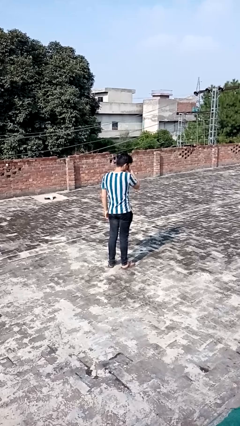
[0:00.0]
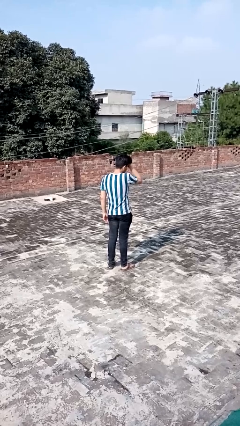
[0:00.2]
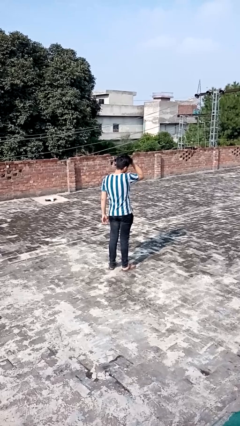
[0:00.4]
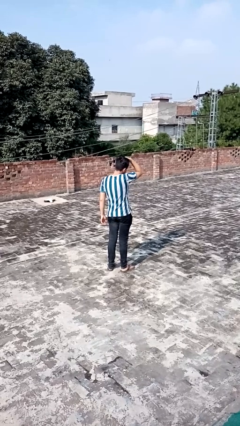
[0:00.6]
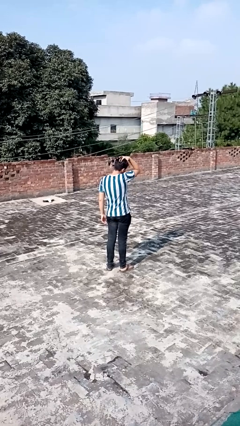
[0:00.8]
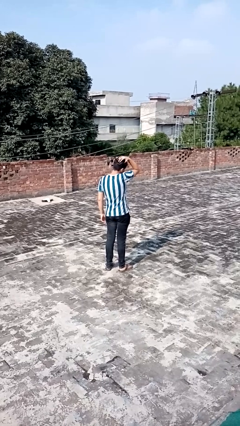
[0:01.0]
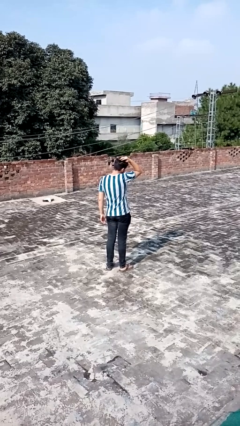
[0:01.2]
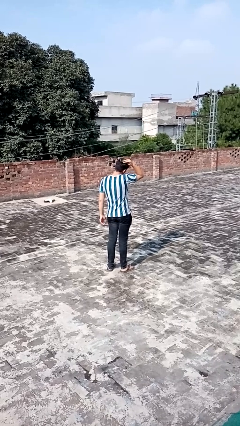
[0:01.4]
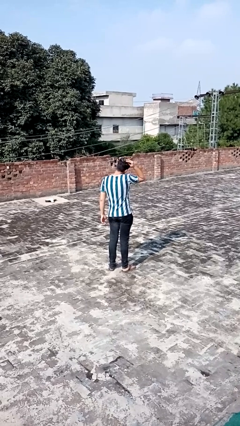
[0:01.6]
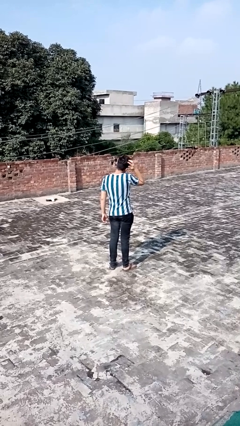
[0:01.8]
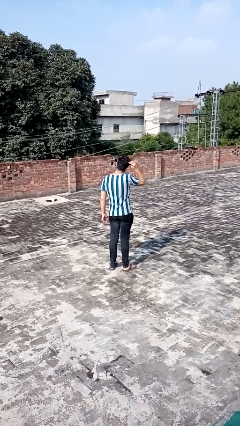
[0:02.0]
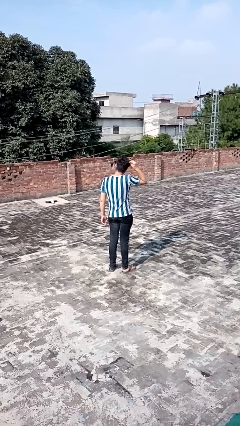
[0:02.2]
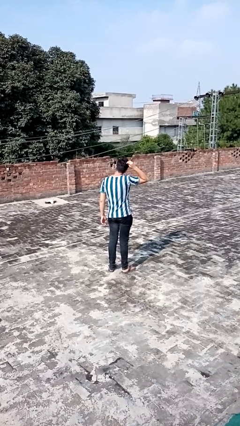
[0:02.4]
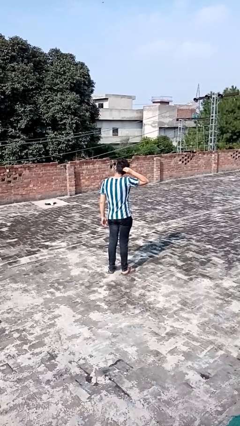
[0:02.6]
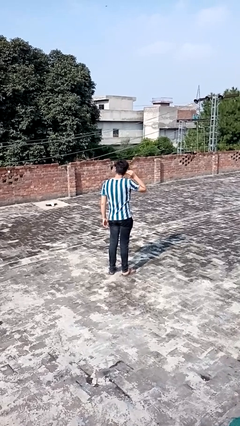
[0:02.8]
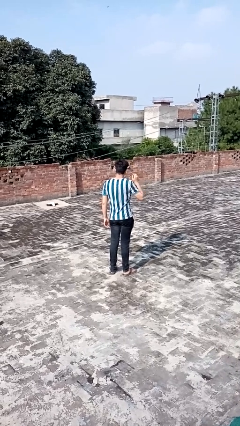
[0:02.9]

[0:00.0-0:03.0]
person strokes hair

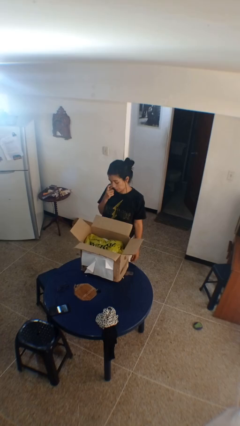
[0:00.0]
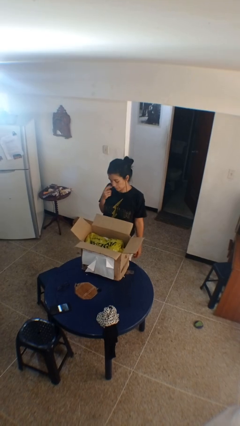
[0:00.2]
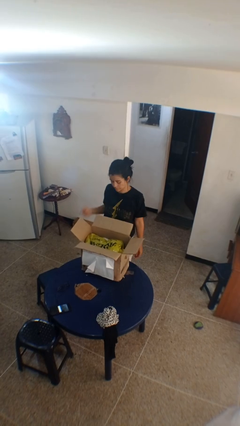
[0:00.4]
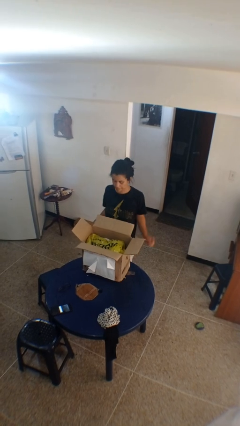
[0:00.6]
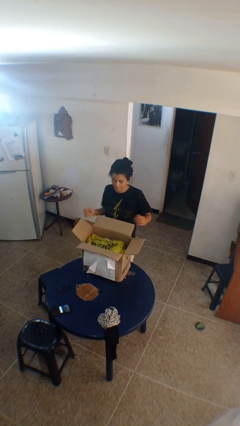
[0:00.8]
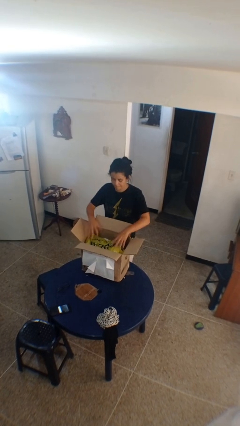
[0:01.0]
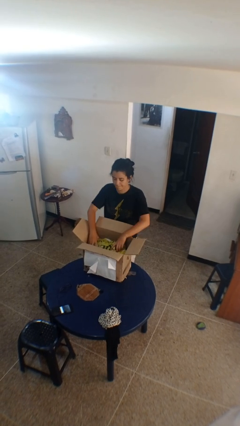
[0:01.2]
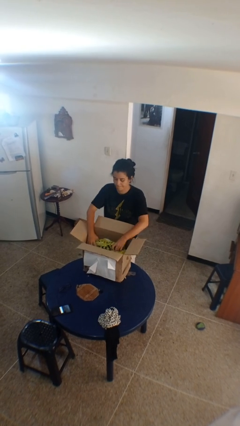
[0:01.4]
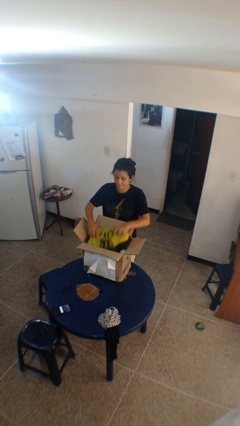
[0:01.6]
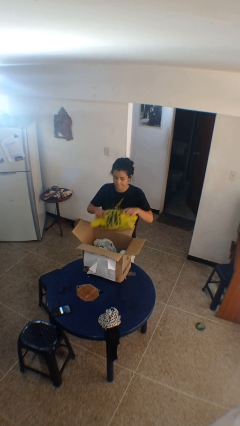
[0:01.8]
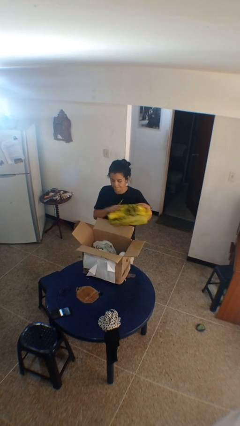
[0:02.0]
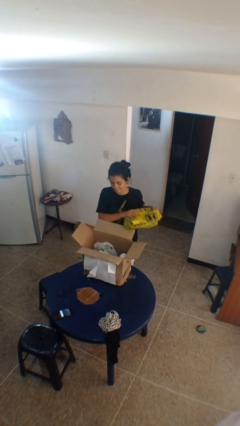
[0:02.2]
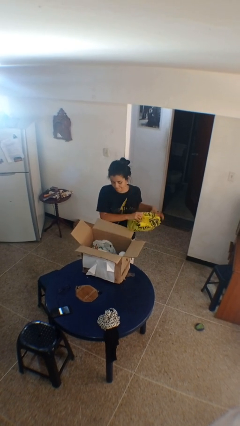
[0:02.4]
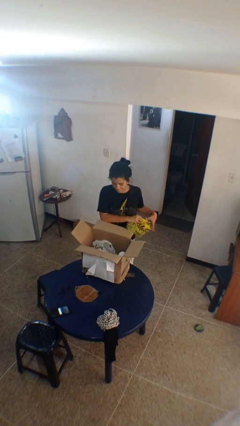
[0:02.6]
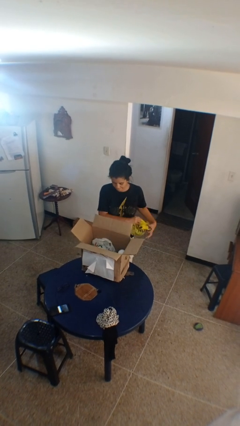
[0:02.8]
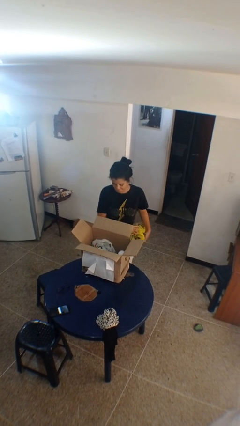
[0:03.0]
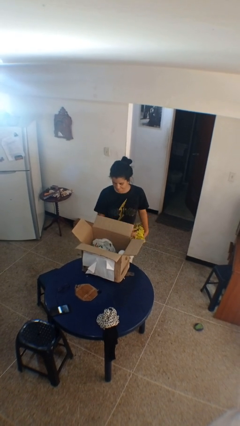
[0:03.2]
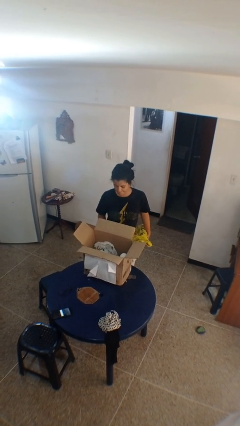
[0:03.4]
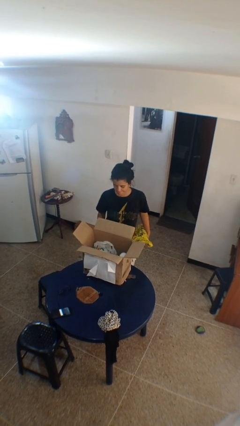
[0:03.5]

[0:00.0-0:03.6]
person takes object from box

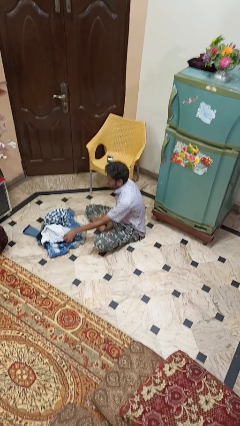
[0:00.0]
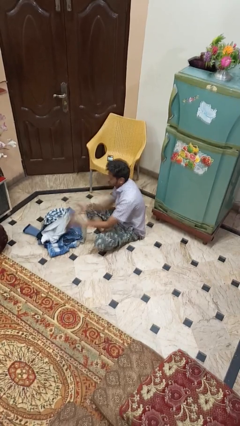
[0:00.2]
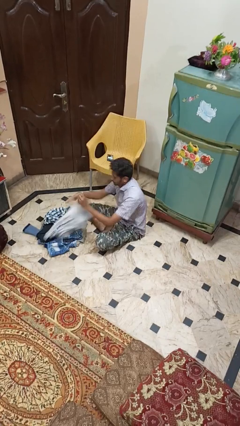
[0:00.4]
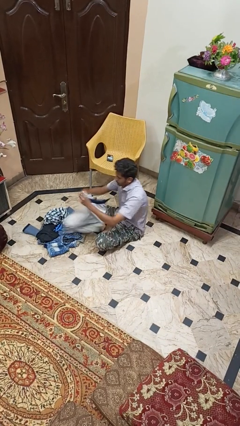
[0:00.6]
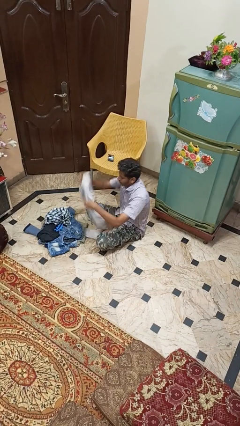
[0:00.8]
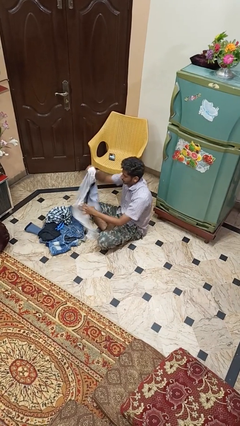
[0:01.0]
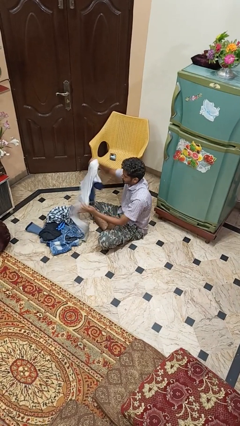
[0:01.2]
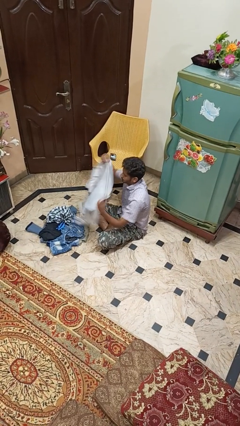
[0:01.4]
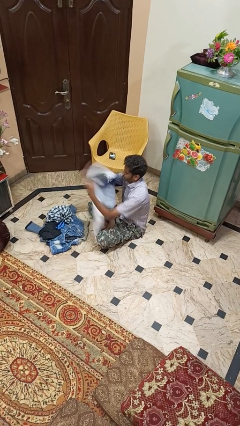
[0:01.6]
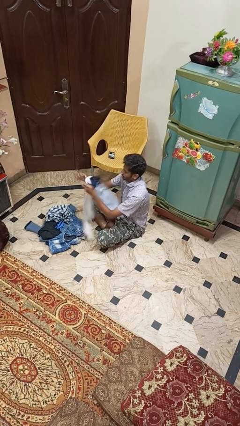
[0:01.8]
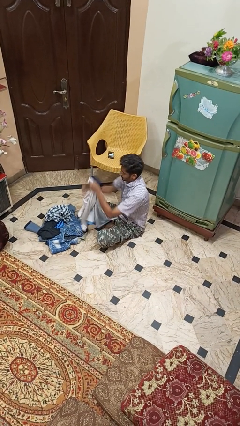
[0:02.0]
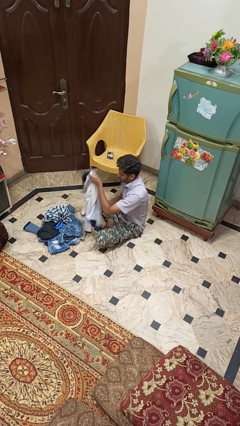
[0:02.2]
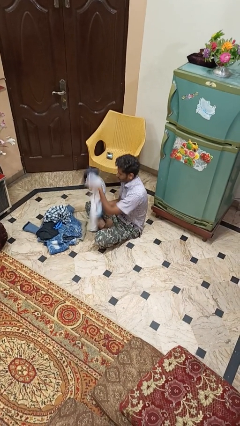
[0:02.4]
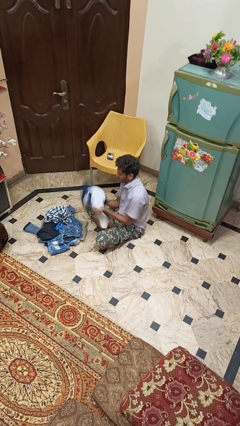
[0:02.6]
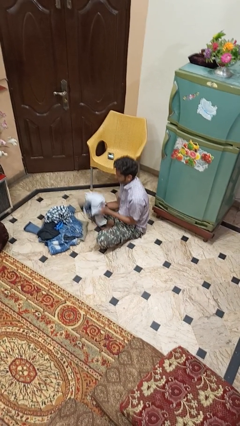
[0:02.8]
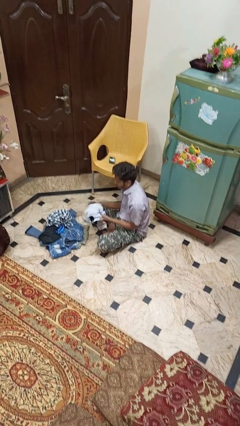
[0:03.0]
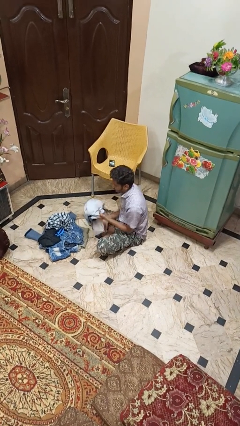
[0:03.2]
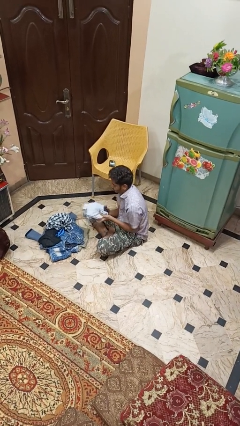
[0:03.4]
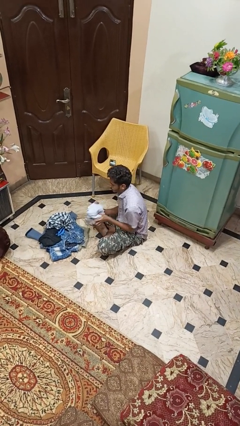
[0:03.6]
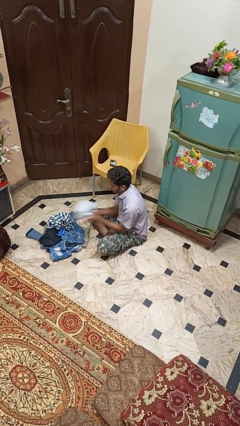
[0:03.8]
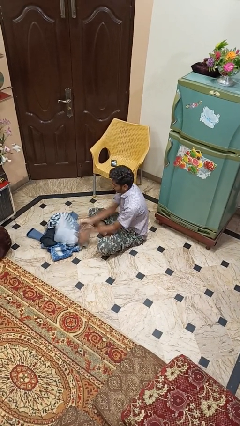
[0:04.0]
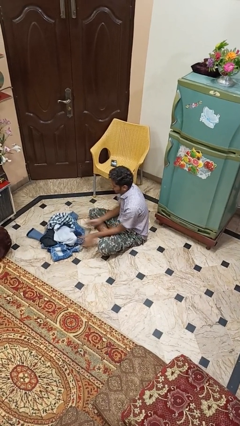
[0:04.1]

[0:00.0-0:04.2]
person folds shirt

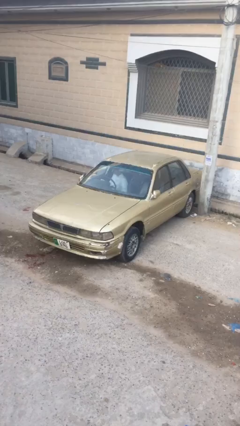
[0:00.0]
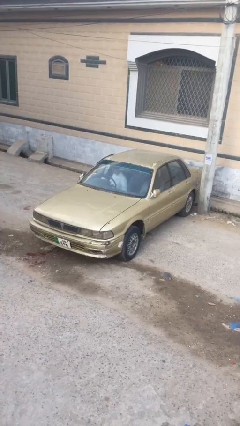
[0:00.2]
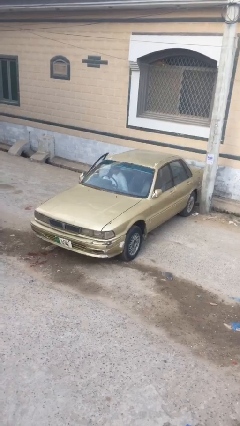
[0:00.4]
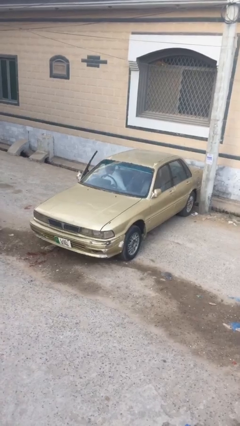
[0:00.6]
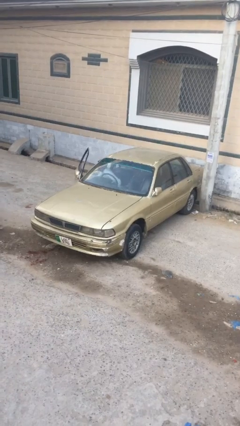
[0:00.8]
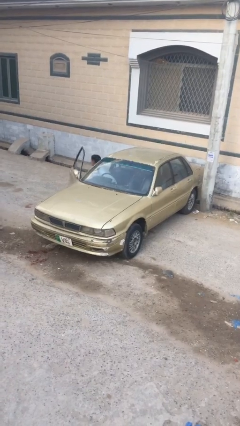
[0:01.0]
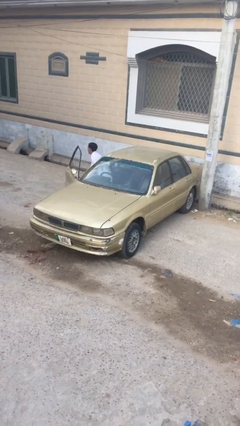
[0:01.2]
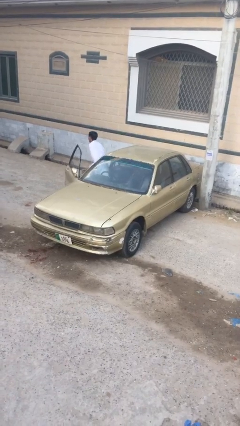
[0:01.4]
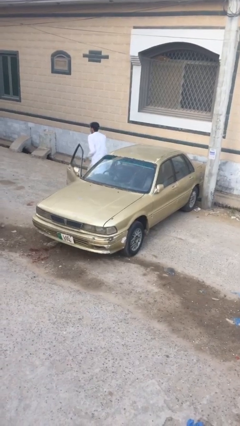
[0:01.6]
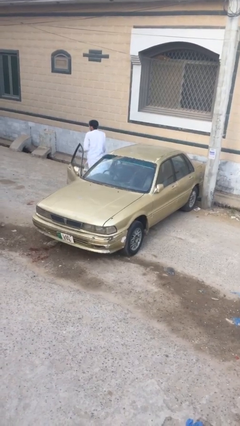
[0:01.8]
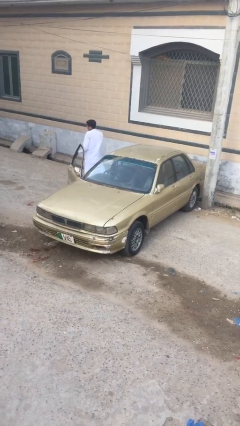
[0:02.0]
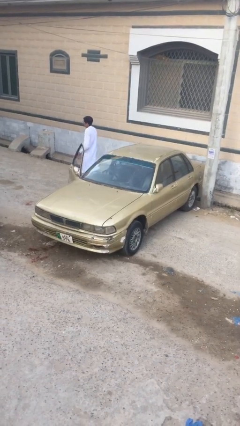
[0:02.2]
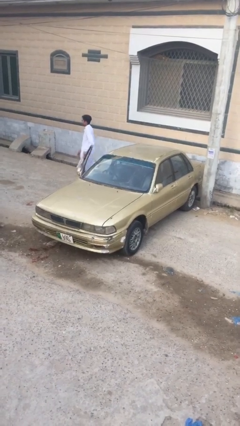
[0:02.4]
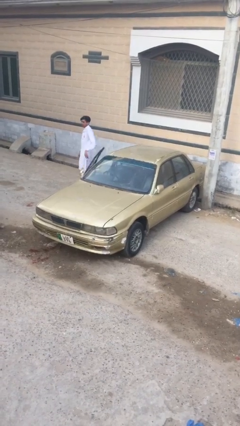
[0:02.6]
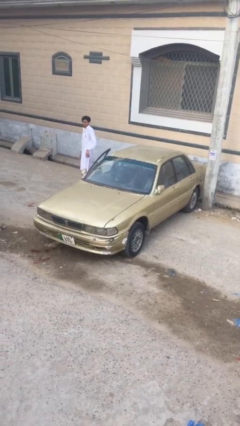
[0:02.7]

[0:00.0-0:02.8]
car drops off person

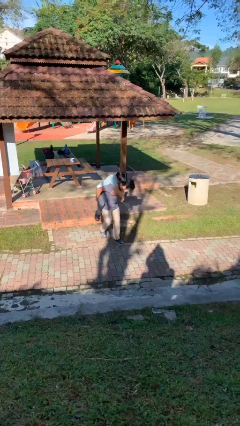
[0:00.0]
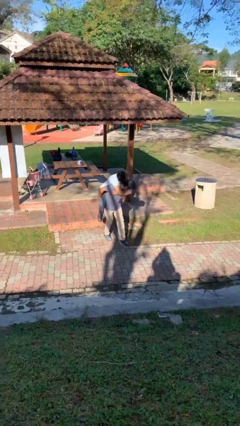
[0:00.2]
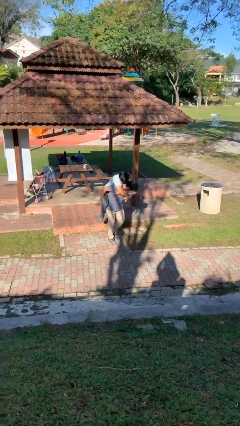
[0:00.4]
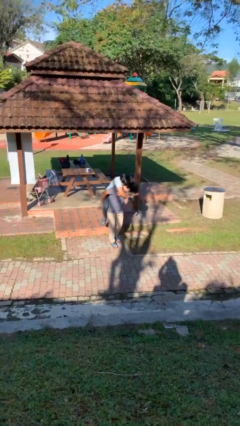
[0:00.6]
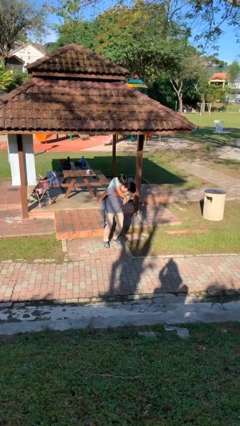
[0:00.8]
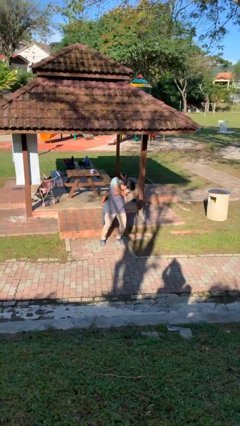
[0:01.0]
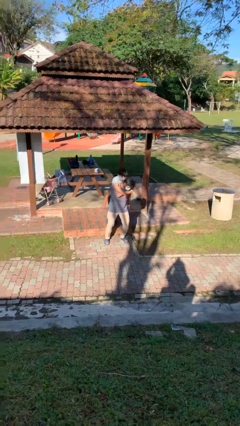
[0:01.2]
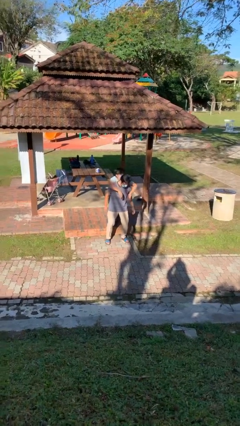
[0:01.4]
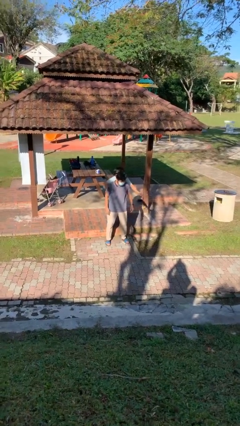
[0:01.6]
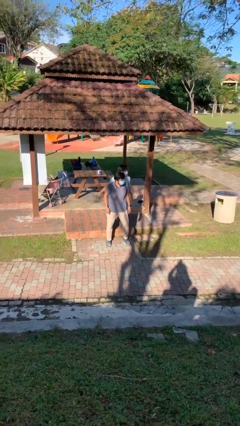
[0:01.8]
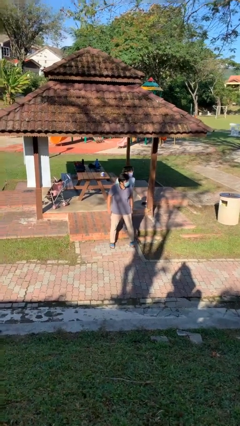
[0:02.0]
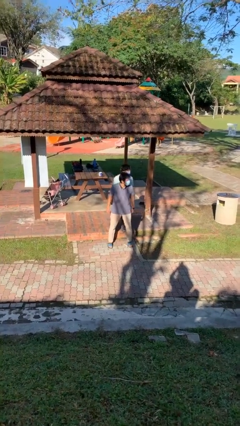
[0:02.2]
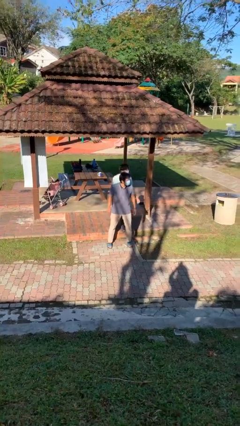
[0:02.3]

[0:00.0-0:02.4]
person puts down person

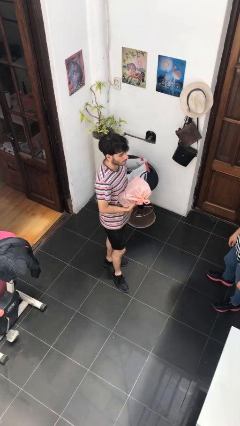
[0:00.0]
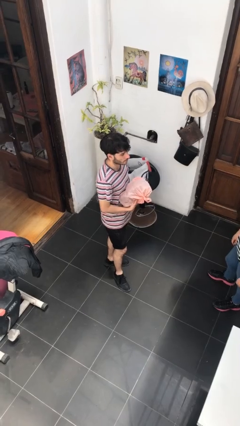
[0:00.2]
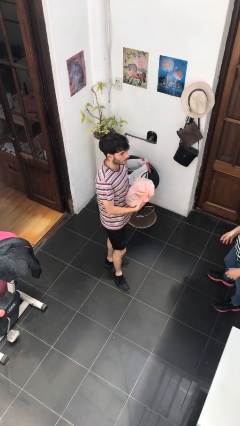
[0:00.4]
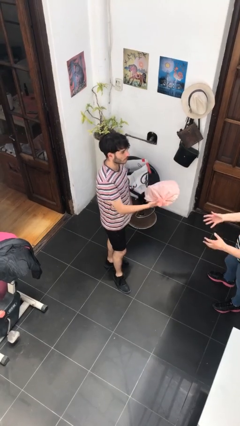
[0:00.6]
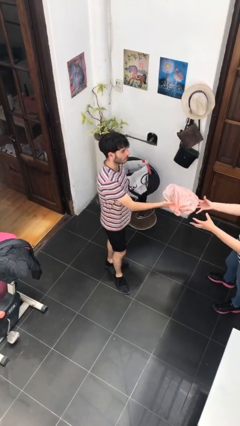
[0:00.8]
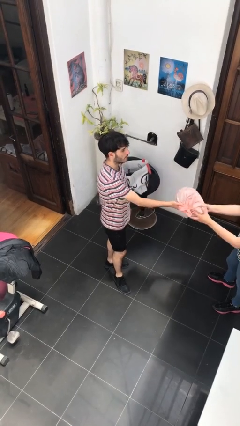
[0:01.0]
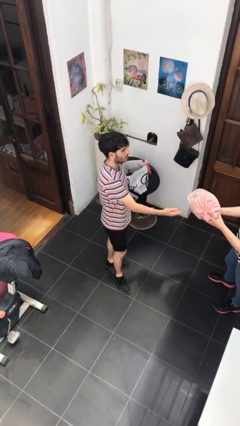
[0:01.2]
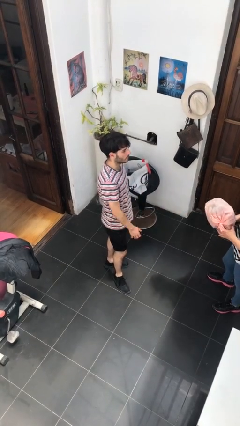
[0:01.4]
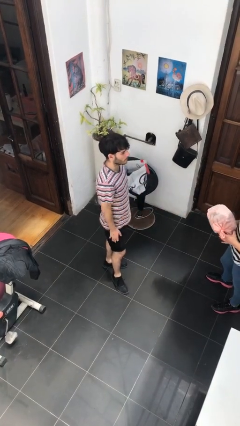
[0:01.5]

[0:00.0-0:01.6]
person transfers object to person
